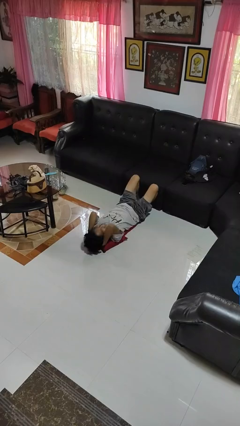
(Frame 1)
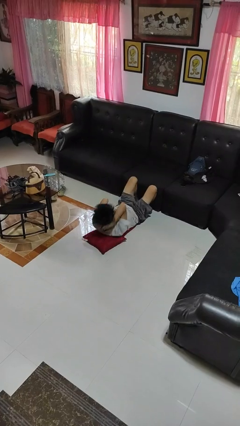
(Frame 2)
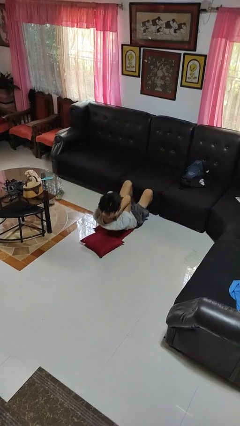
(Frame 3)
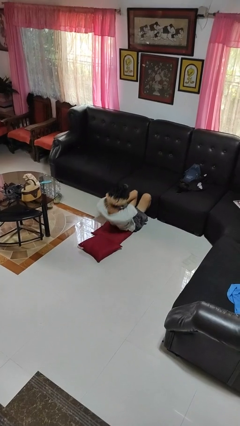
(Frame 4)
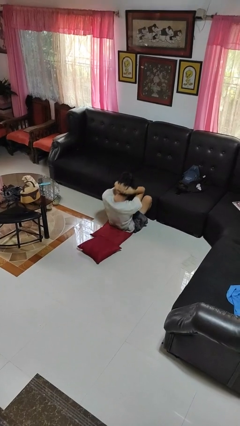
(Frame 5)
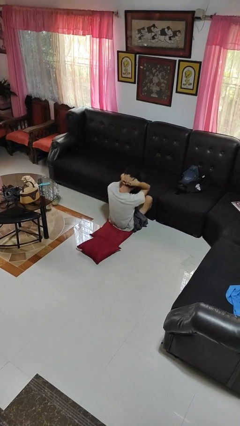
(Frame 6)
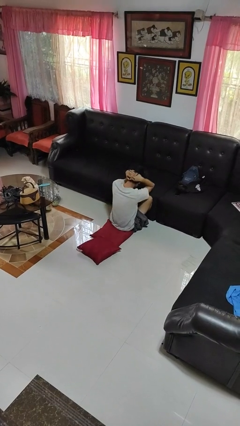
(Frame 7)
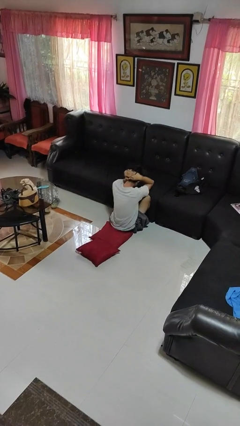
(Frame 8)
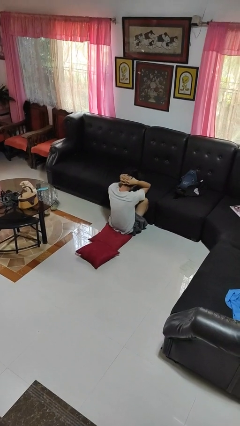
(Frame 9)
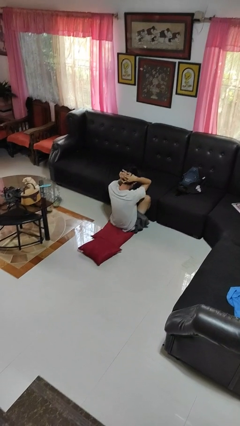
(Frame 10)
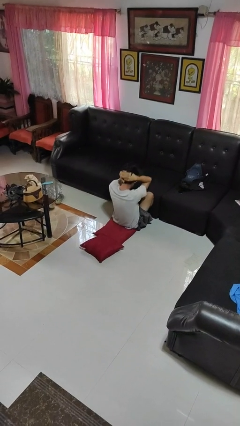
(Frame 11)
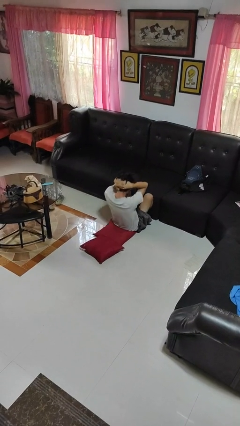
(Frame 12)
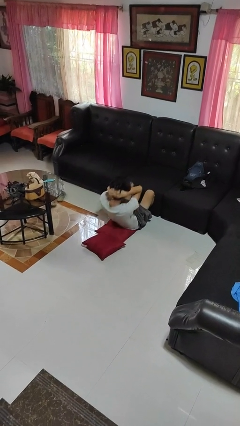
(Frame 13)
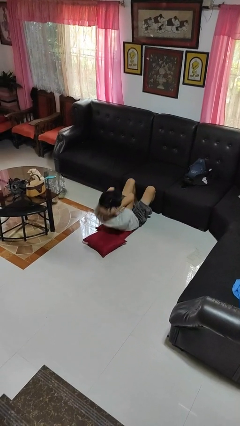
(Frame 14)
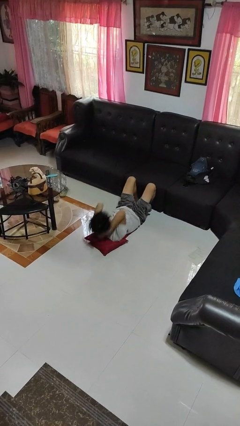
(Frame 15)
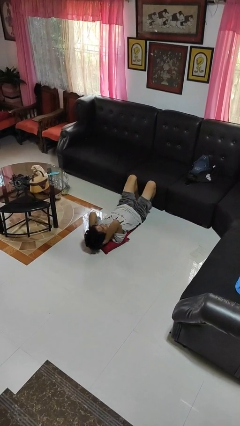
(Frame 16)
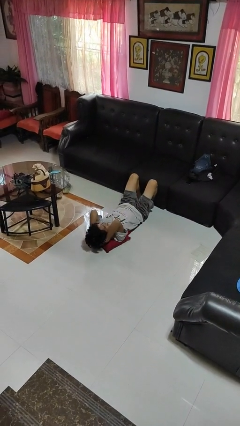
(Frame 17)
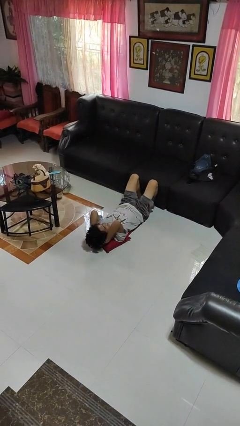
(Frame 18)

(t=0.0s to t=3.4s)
person exercises with situp

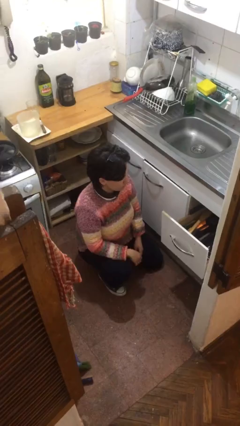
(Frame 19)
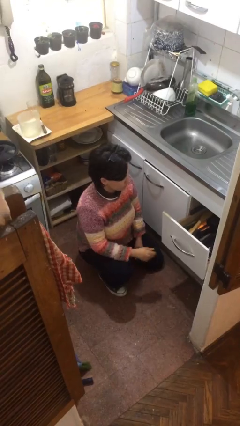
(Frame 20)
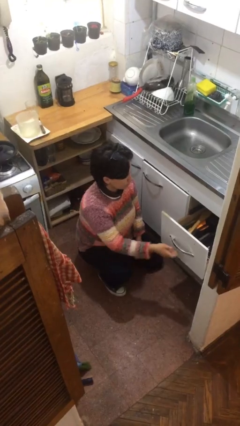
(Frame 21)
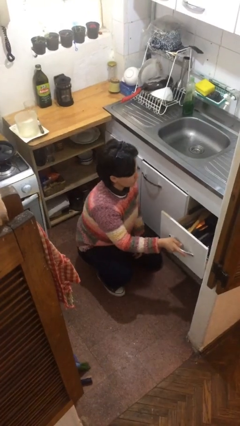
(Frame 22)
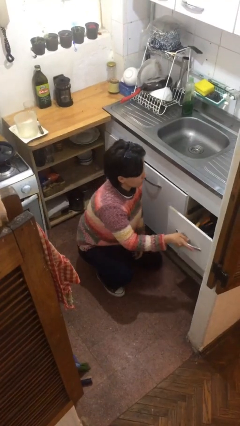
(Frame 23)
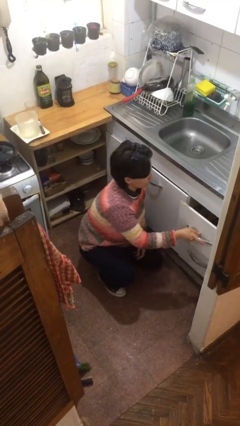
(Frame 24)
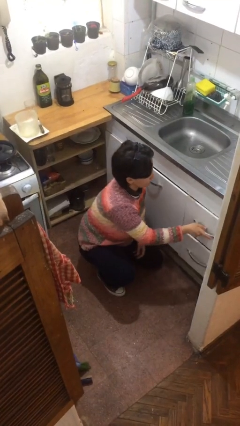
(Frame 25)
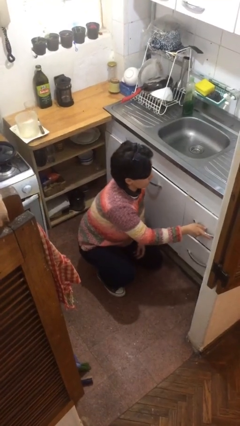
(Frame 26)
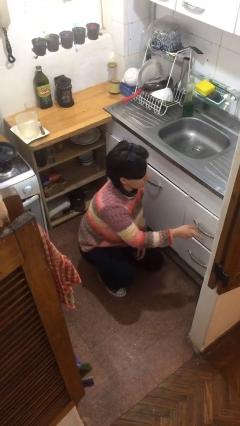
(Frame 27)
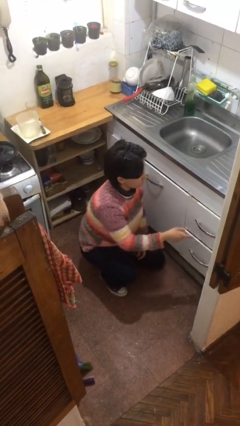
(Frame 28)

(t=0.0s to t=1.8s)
person closes kitchen drawer

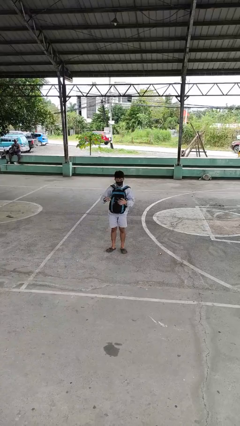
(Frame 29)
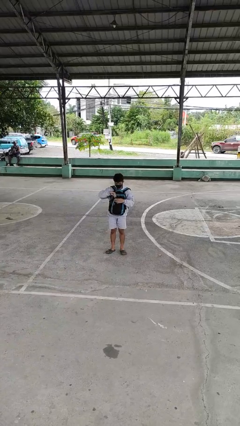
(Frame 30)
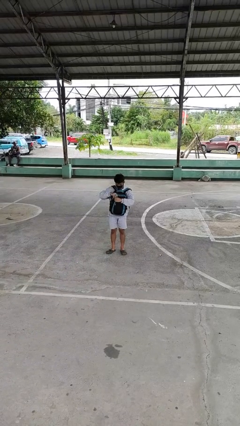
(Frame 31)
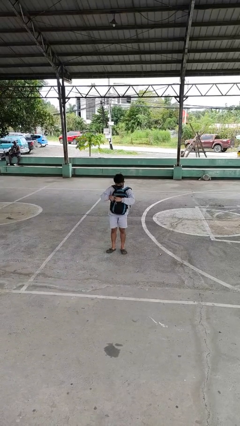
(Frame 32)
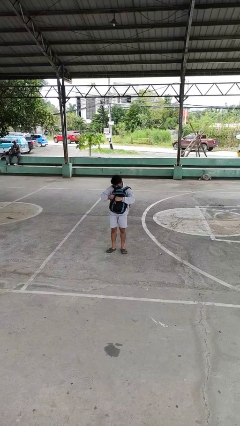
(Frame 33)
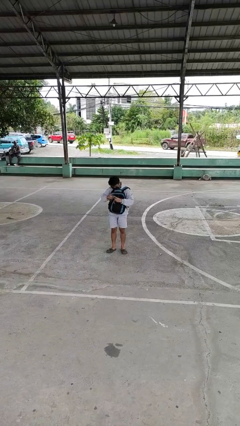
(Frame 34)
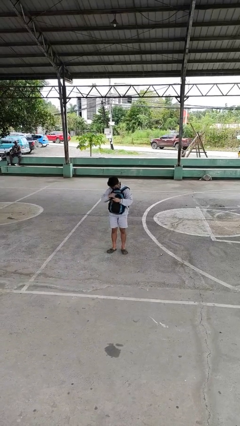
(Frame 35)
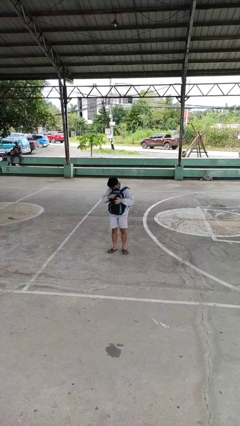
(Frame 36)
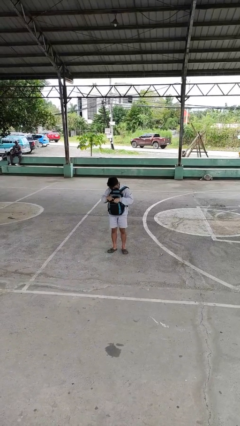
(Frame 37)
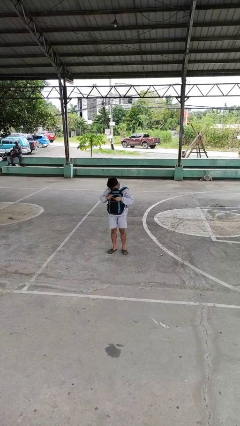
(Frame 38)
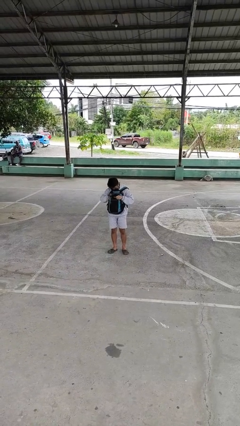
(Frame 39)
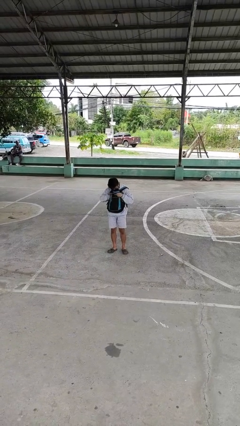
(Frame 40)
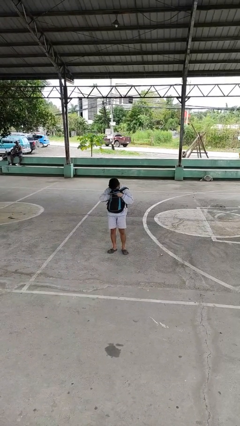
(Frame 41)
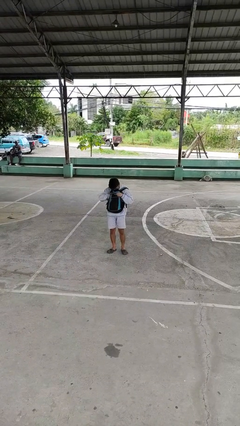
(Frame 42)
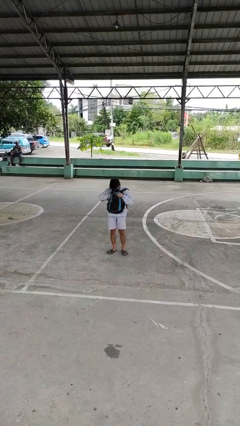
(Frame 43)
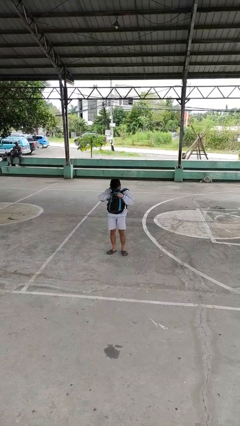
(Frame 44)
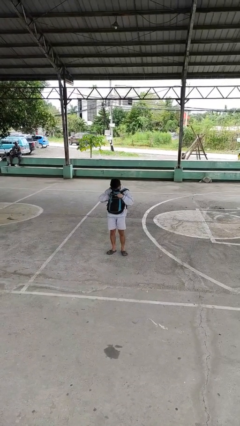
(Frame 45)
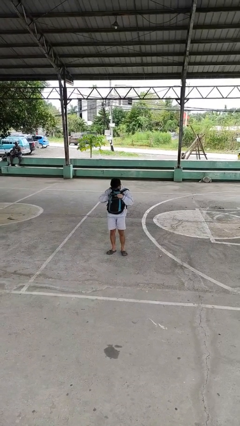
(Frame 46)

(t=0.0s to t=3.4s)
person searches in backpack

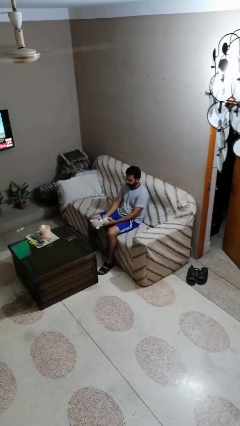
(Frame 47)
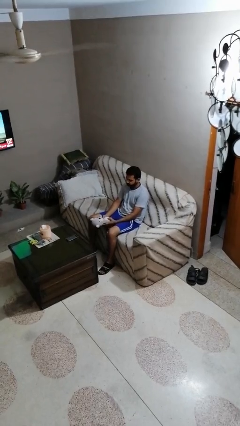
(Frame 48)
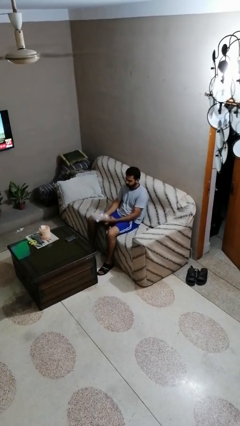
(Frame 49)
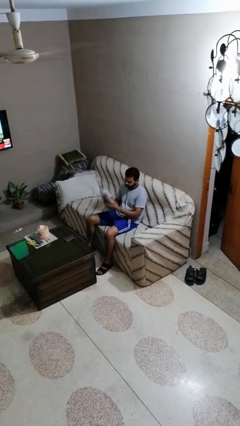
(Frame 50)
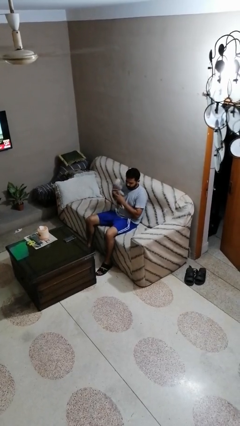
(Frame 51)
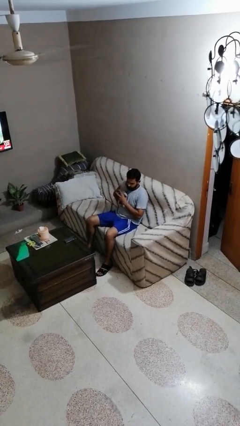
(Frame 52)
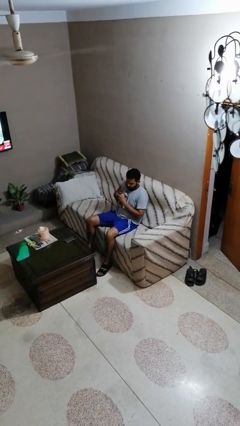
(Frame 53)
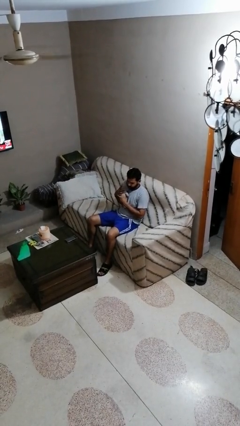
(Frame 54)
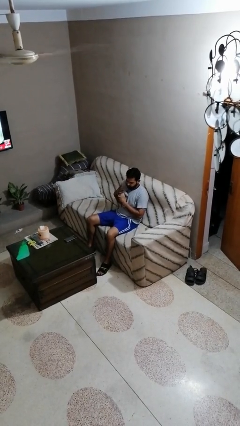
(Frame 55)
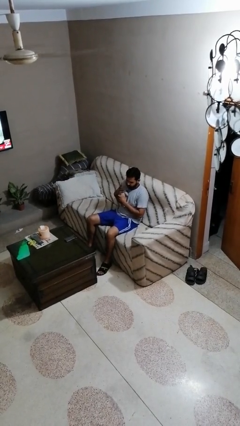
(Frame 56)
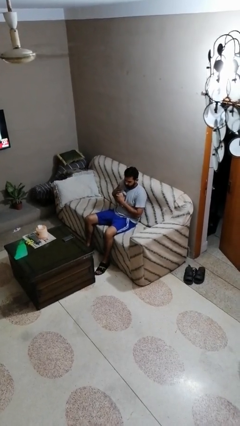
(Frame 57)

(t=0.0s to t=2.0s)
person hugs stuffed animal

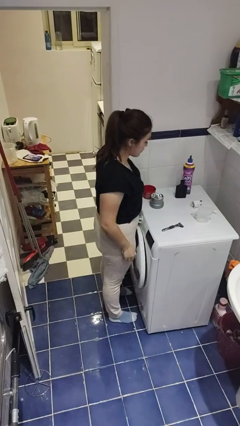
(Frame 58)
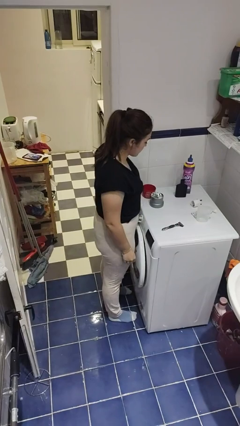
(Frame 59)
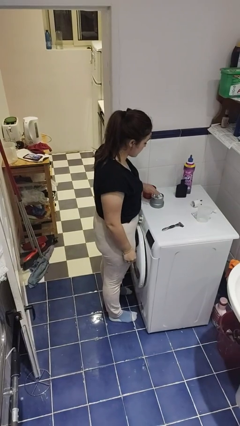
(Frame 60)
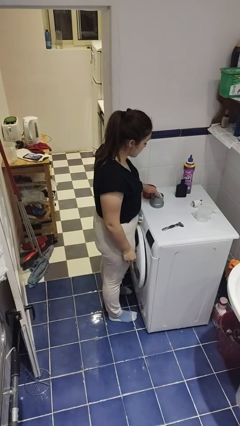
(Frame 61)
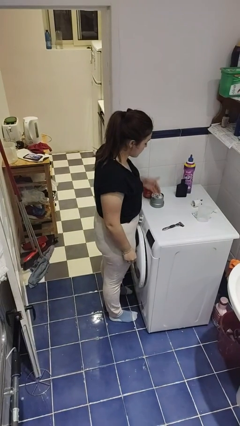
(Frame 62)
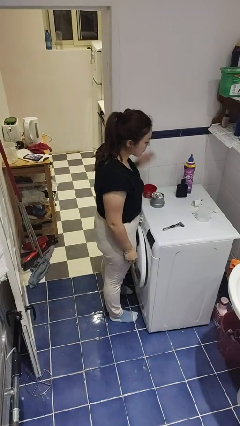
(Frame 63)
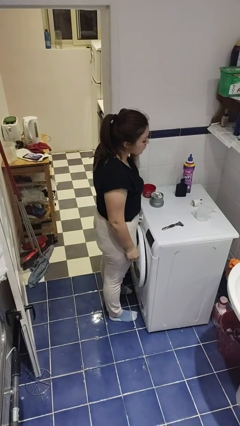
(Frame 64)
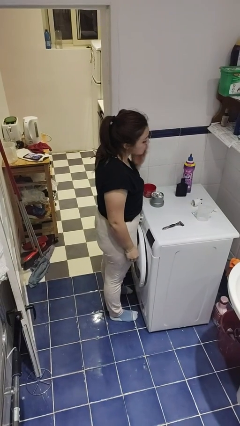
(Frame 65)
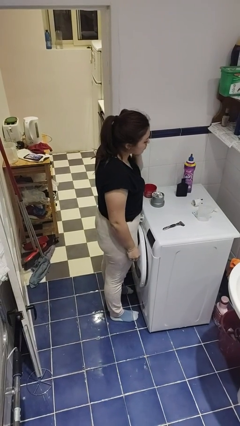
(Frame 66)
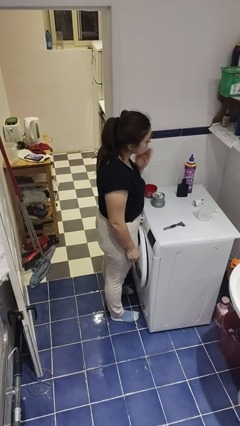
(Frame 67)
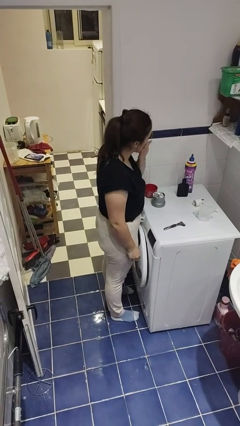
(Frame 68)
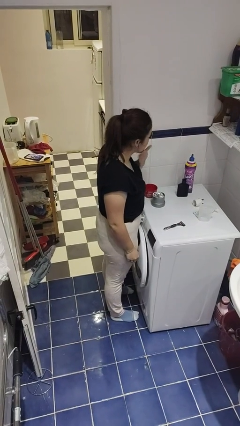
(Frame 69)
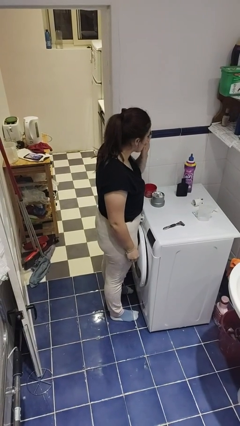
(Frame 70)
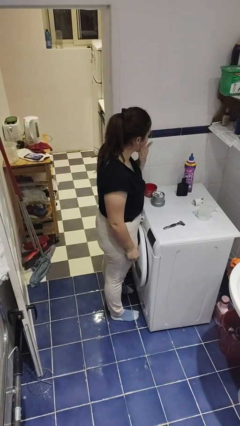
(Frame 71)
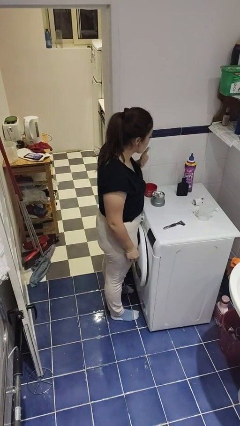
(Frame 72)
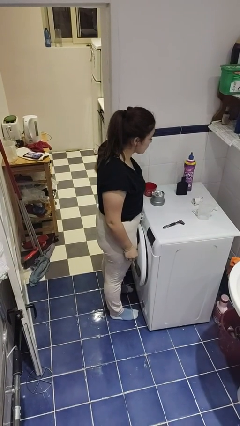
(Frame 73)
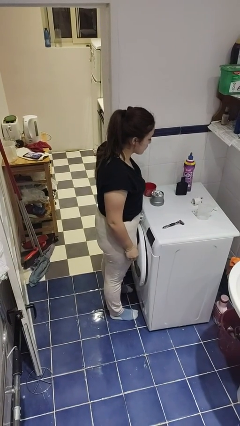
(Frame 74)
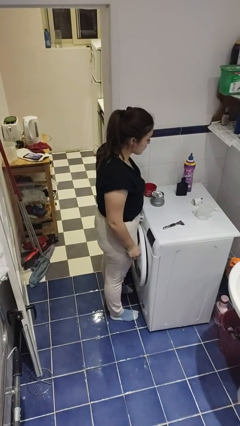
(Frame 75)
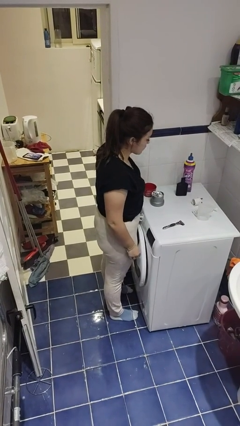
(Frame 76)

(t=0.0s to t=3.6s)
person applies shaving cream

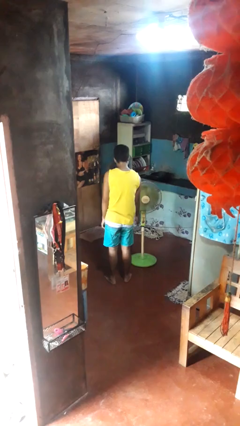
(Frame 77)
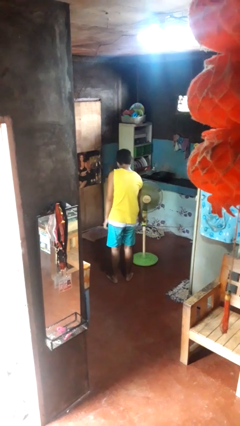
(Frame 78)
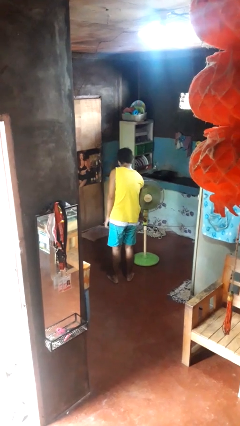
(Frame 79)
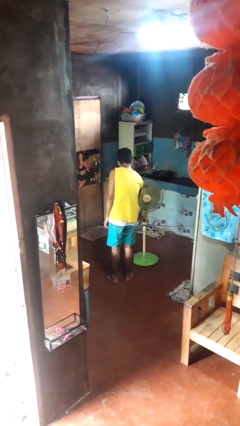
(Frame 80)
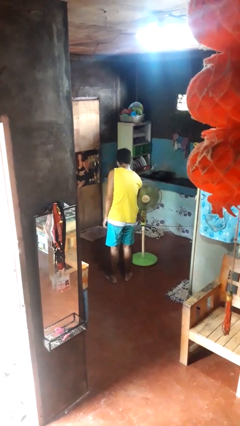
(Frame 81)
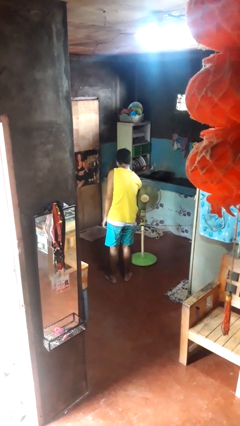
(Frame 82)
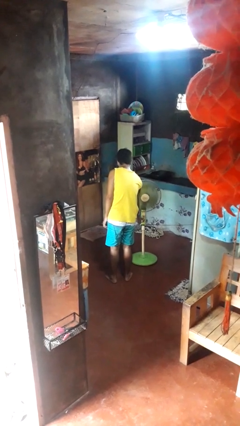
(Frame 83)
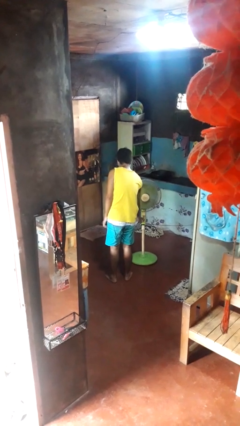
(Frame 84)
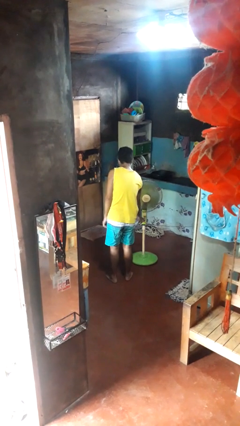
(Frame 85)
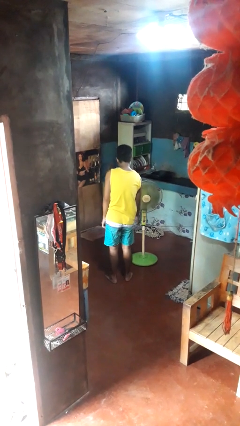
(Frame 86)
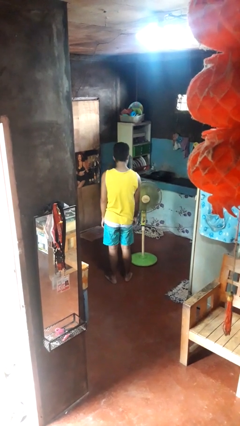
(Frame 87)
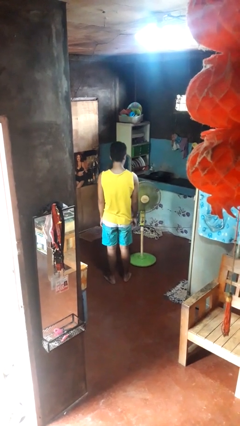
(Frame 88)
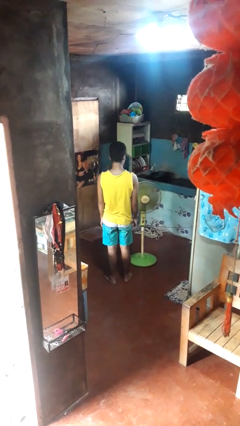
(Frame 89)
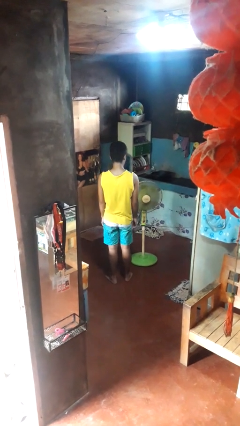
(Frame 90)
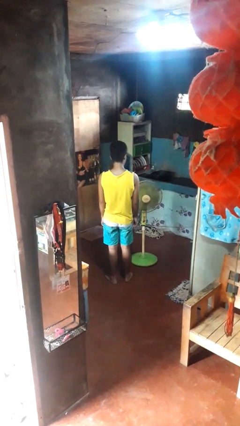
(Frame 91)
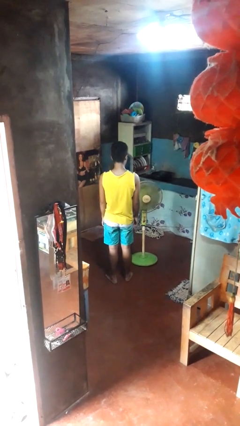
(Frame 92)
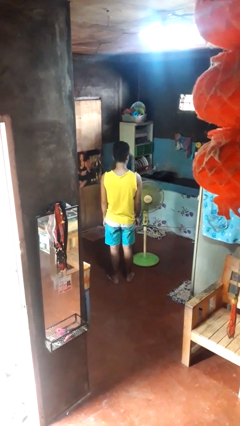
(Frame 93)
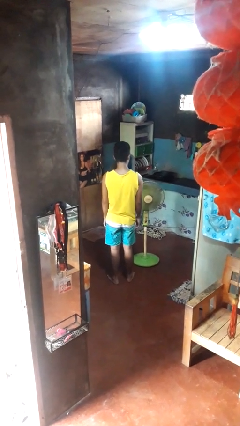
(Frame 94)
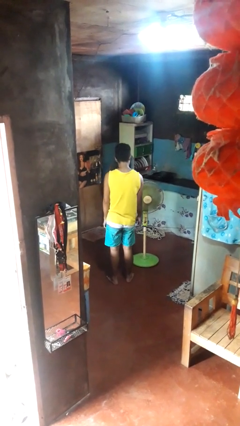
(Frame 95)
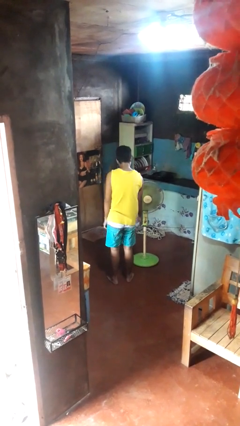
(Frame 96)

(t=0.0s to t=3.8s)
person turns on fan
